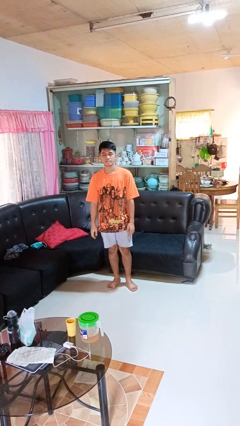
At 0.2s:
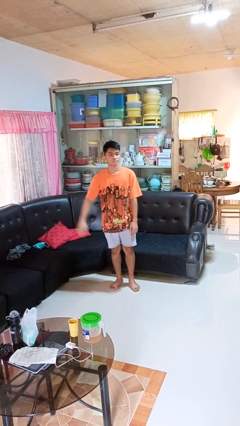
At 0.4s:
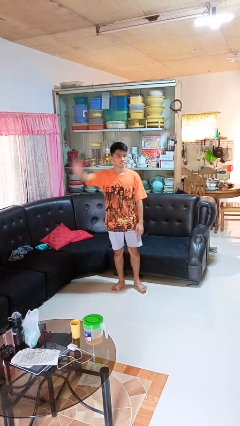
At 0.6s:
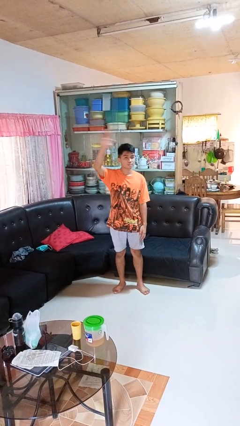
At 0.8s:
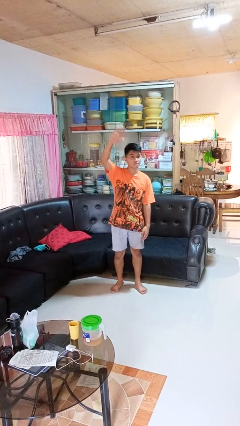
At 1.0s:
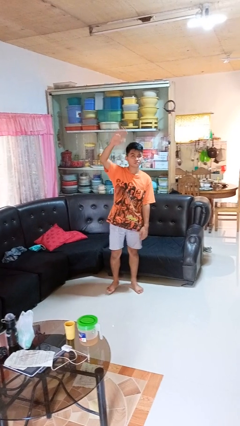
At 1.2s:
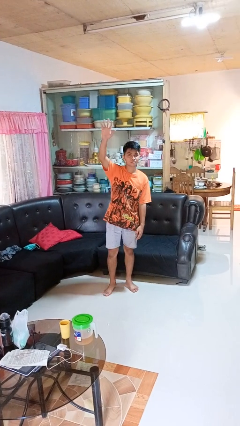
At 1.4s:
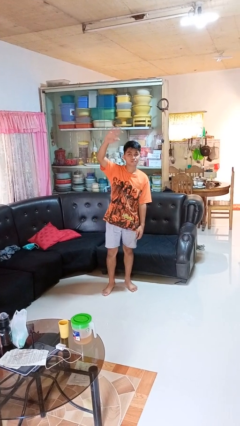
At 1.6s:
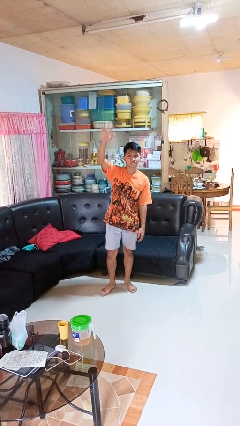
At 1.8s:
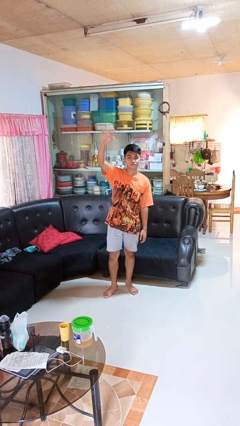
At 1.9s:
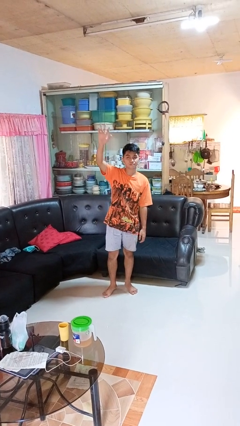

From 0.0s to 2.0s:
person waves at person

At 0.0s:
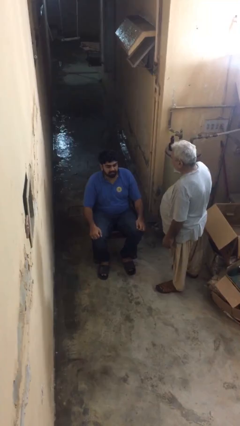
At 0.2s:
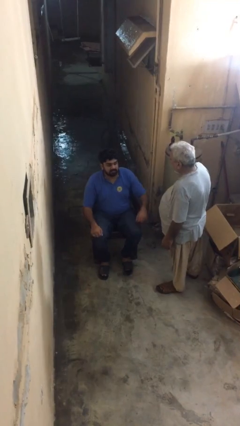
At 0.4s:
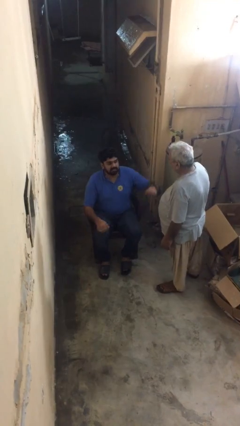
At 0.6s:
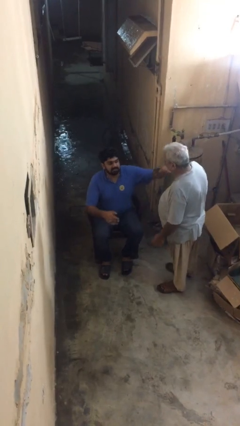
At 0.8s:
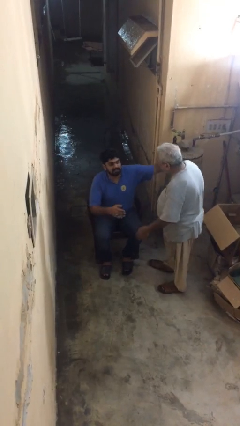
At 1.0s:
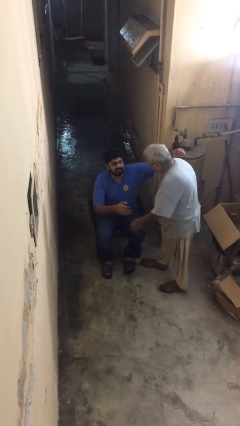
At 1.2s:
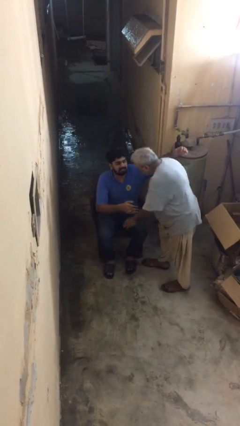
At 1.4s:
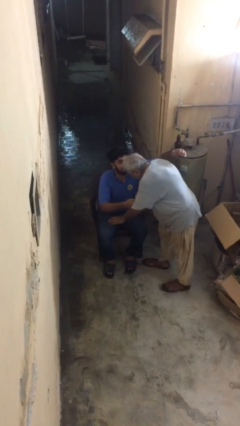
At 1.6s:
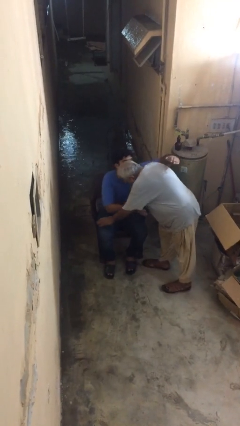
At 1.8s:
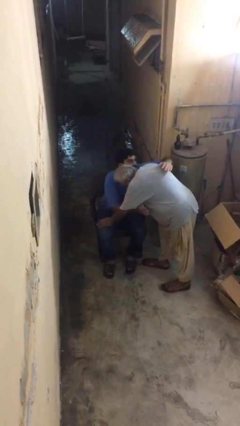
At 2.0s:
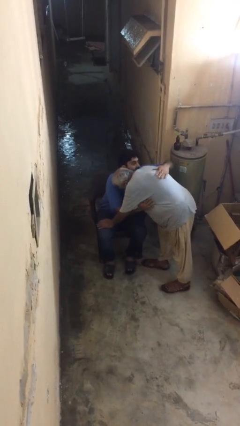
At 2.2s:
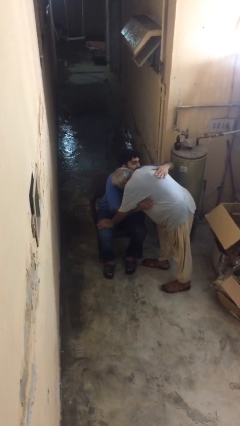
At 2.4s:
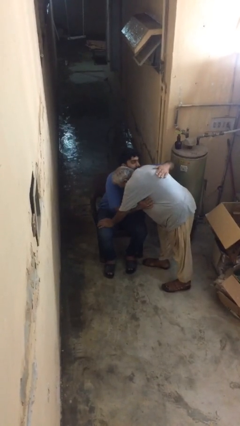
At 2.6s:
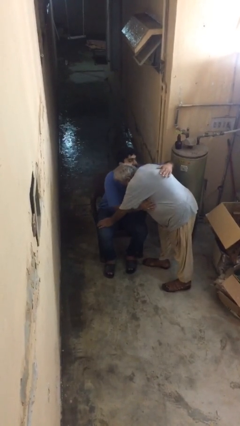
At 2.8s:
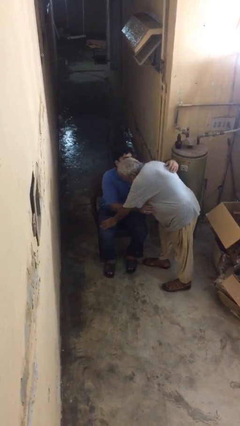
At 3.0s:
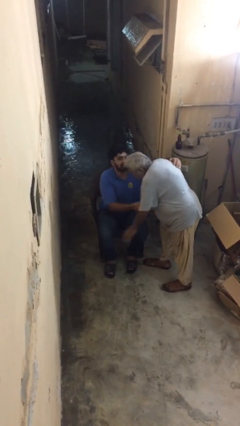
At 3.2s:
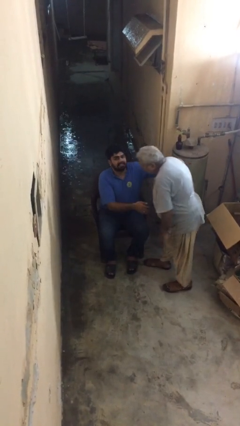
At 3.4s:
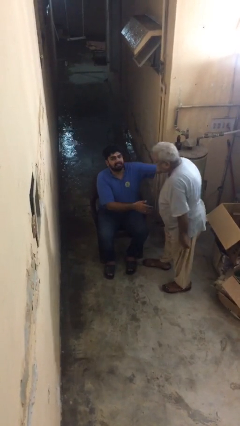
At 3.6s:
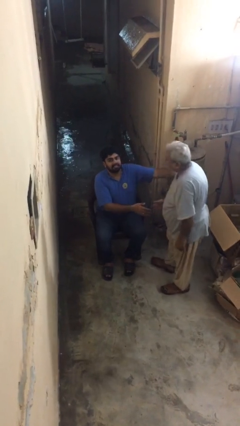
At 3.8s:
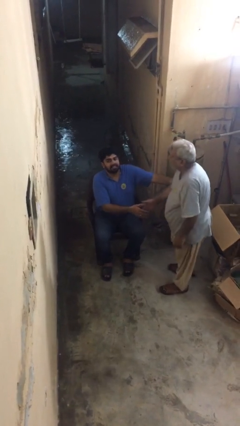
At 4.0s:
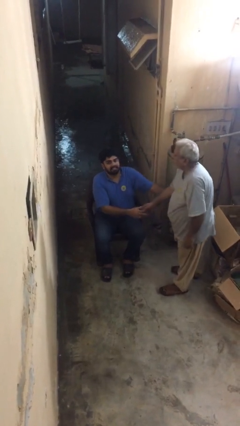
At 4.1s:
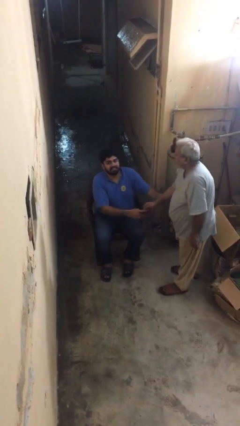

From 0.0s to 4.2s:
person embraces person

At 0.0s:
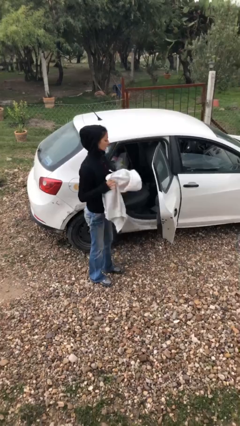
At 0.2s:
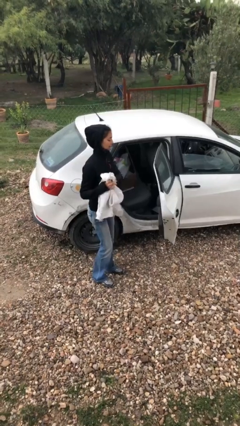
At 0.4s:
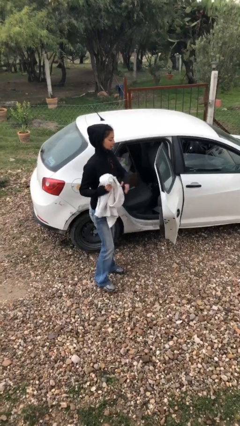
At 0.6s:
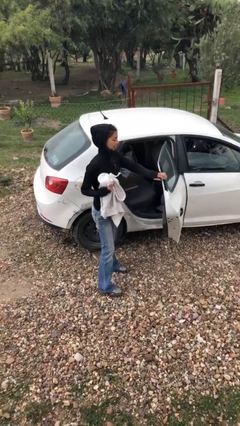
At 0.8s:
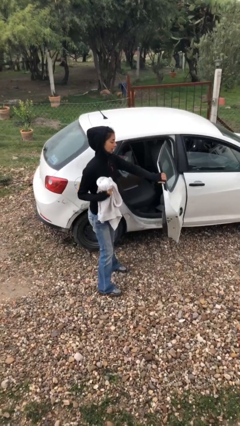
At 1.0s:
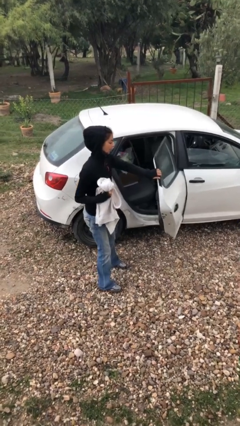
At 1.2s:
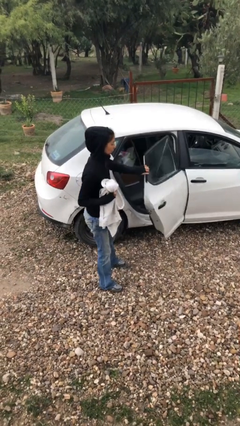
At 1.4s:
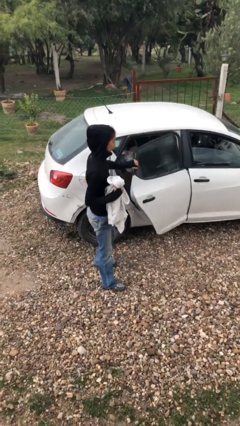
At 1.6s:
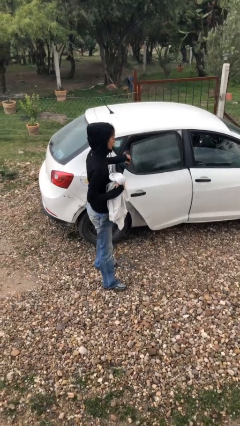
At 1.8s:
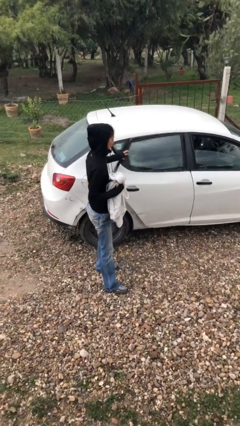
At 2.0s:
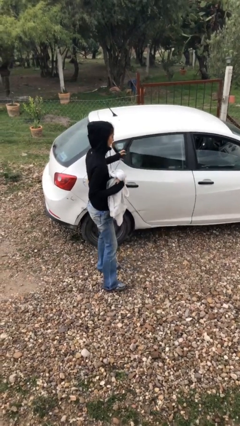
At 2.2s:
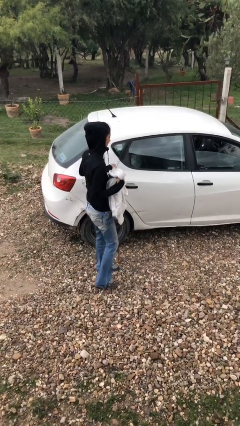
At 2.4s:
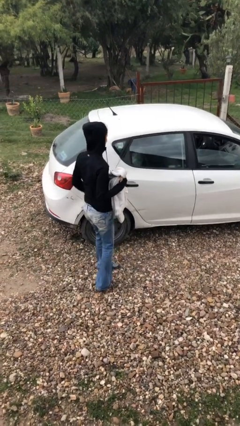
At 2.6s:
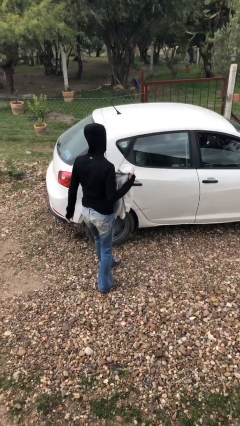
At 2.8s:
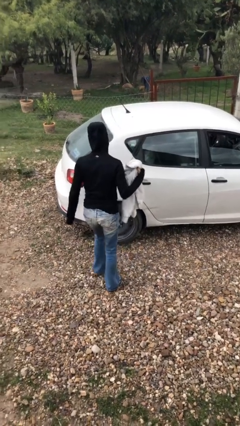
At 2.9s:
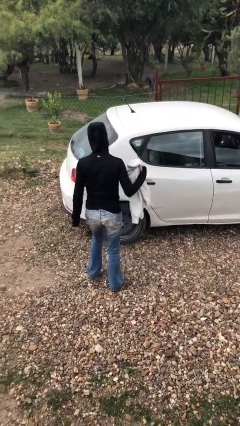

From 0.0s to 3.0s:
person closes car door

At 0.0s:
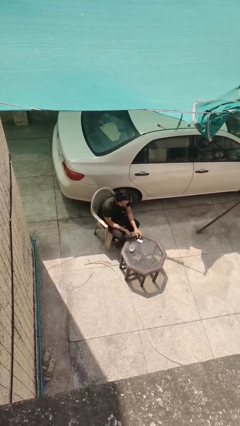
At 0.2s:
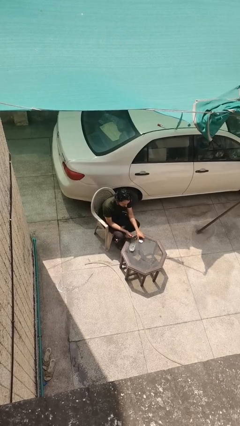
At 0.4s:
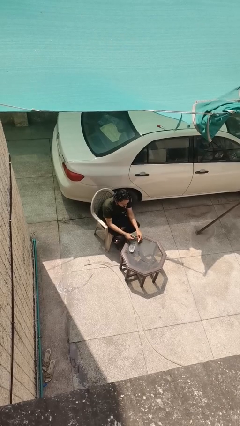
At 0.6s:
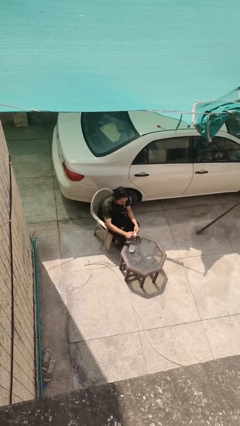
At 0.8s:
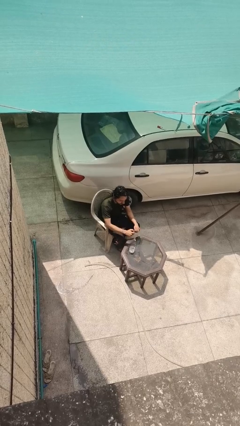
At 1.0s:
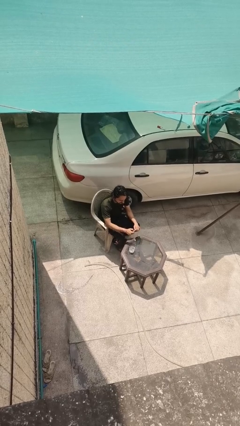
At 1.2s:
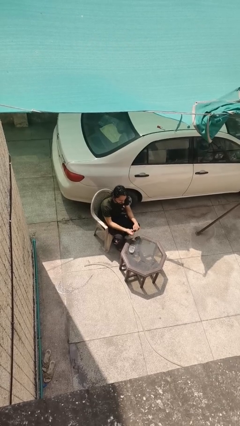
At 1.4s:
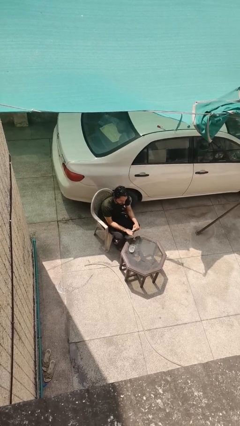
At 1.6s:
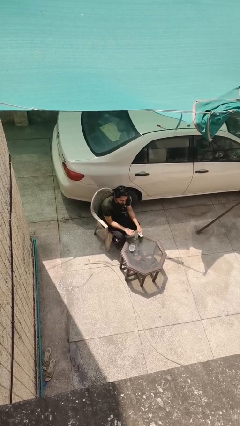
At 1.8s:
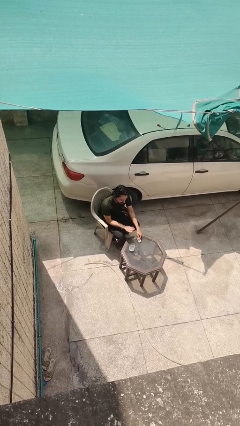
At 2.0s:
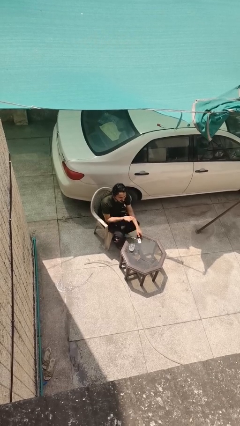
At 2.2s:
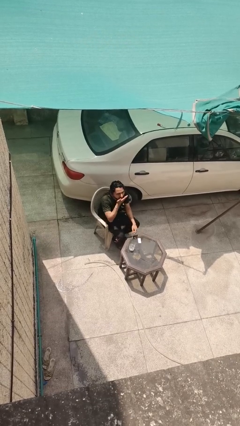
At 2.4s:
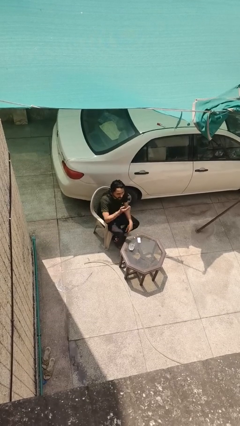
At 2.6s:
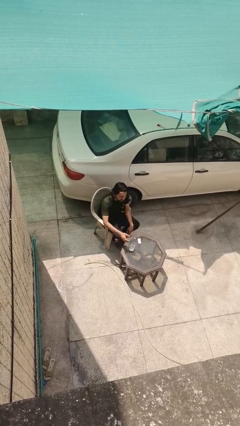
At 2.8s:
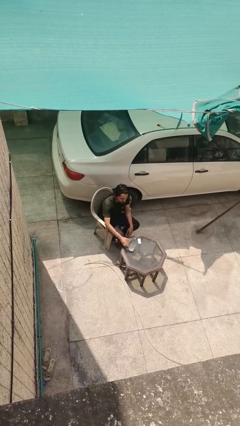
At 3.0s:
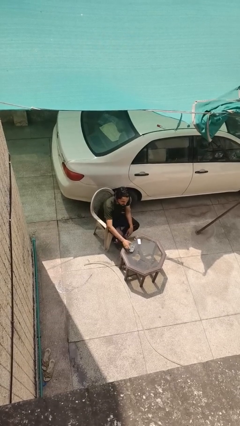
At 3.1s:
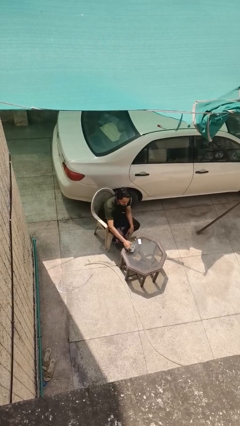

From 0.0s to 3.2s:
person takes medicine pills

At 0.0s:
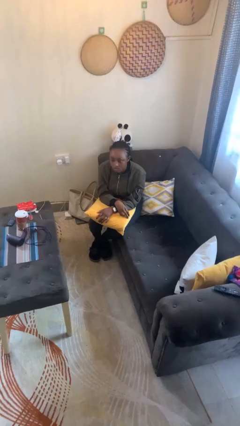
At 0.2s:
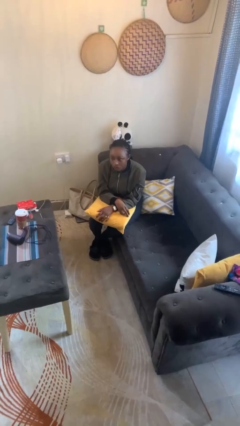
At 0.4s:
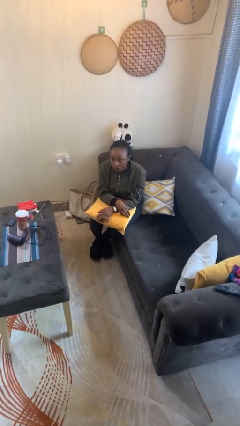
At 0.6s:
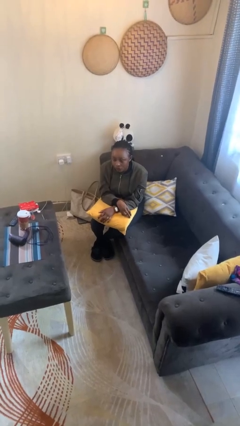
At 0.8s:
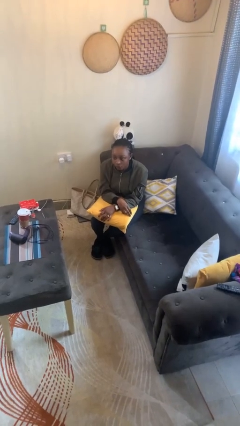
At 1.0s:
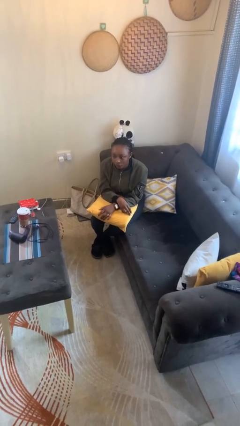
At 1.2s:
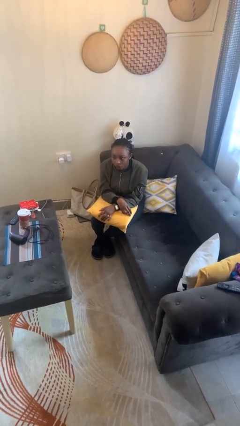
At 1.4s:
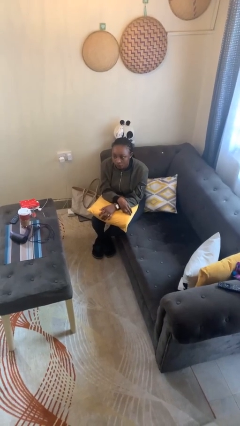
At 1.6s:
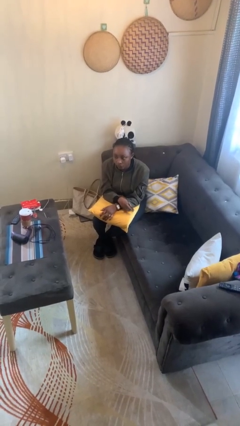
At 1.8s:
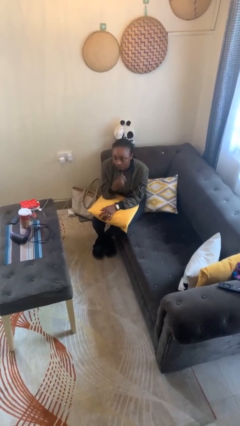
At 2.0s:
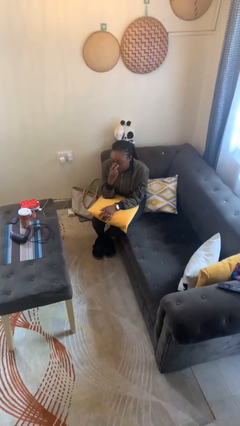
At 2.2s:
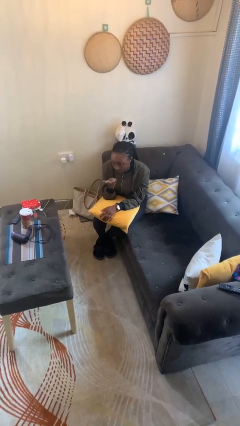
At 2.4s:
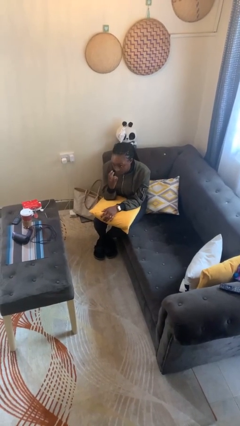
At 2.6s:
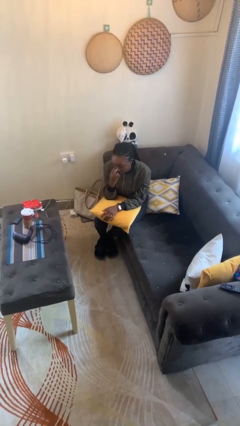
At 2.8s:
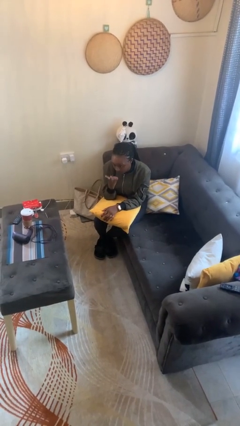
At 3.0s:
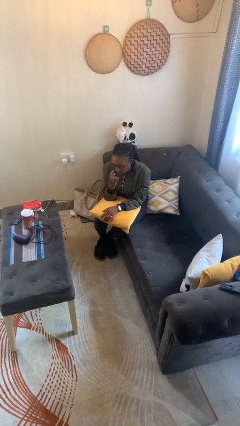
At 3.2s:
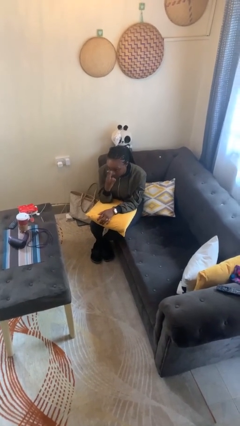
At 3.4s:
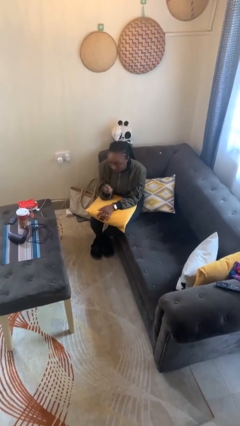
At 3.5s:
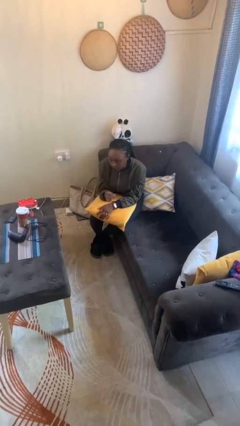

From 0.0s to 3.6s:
person gestures watch closely

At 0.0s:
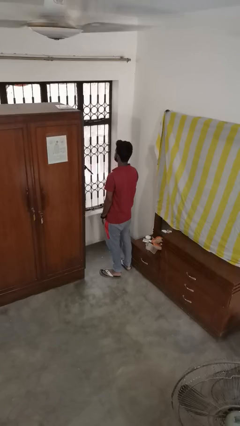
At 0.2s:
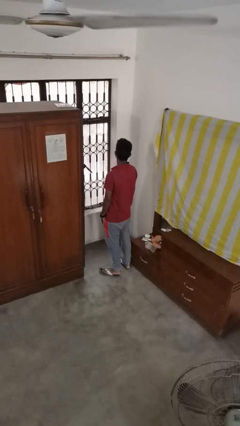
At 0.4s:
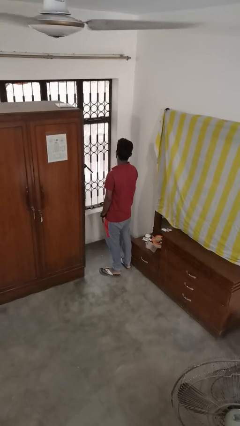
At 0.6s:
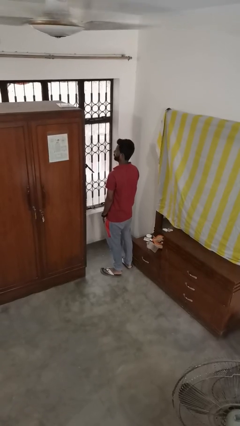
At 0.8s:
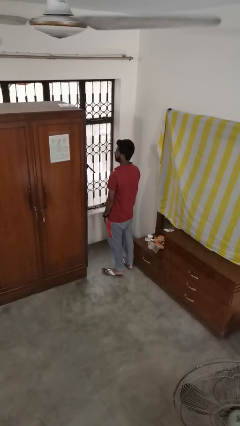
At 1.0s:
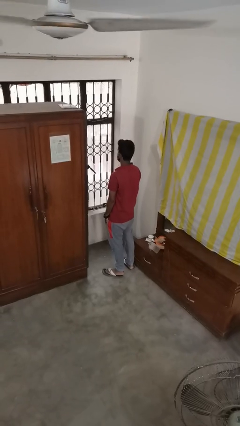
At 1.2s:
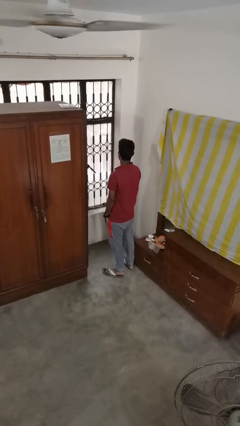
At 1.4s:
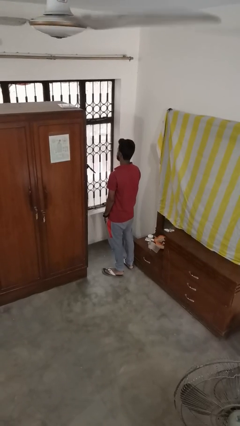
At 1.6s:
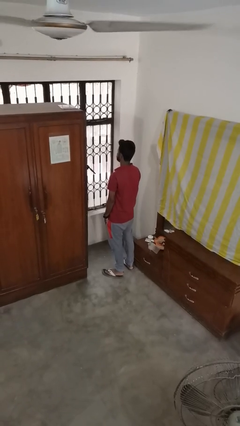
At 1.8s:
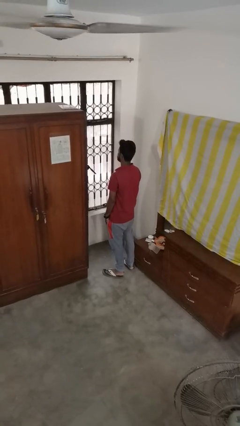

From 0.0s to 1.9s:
person shakes head
